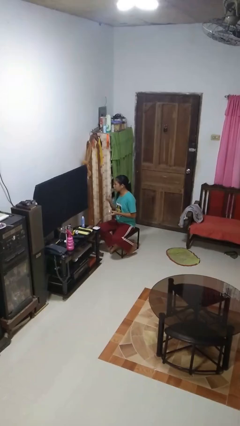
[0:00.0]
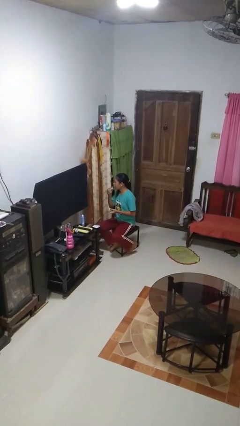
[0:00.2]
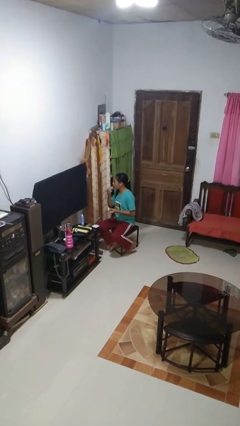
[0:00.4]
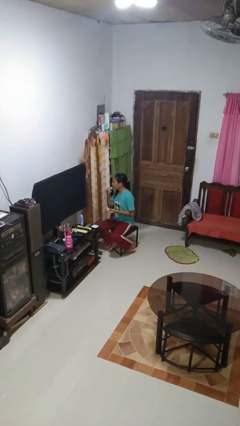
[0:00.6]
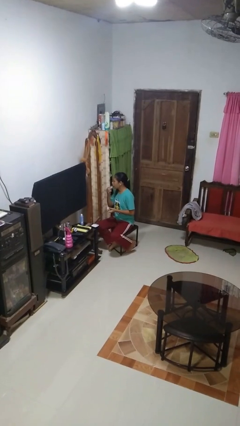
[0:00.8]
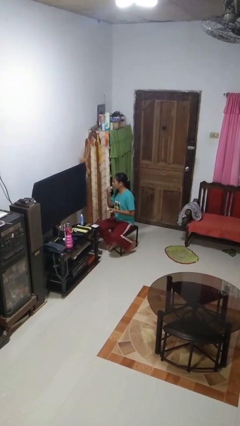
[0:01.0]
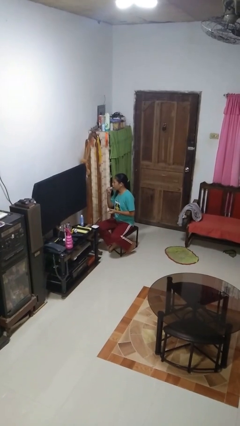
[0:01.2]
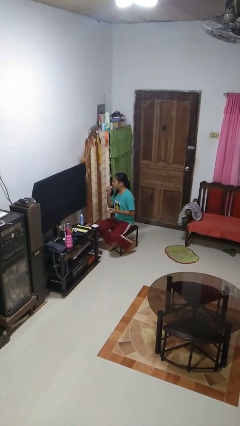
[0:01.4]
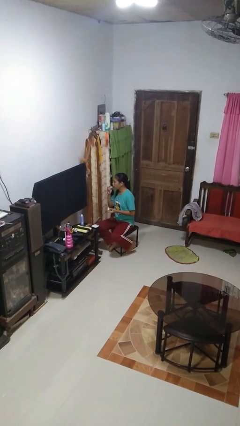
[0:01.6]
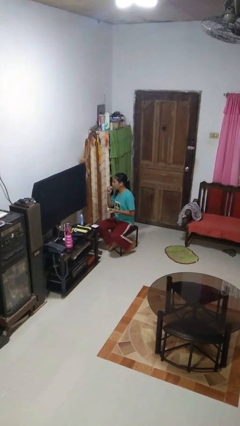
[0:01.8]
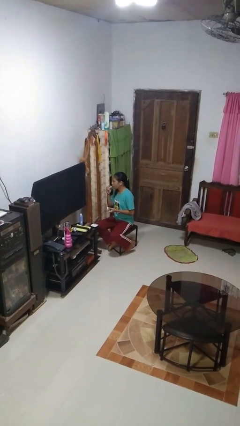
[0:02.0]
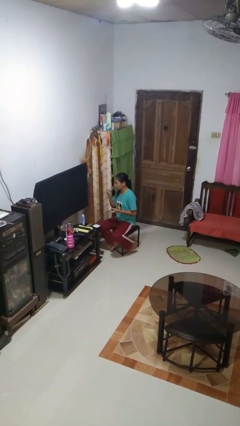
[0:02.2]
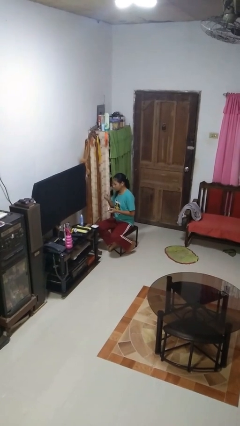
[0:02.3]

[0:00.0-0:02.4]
person applies lip makeup

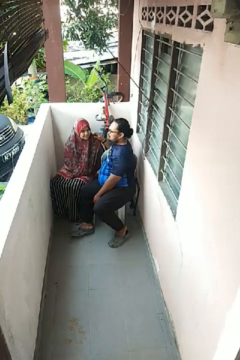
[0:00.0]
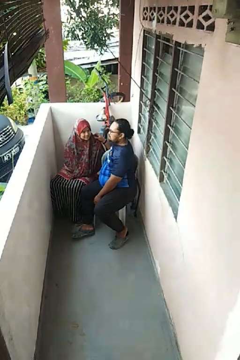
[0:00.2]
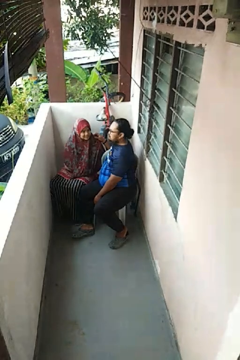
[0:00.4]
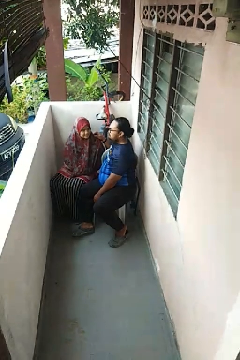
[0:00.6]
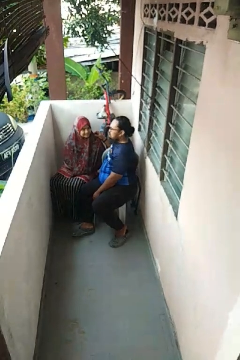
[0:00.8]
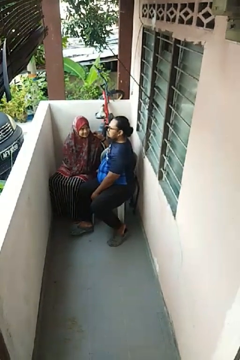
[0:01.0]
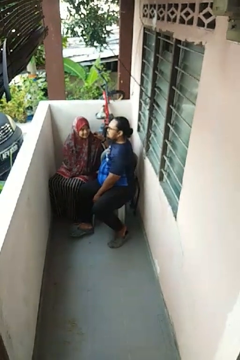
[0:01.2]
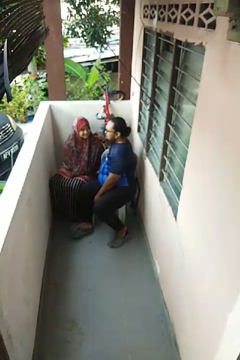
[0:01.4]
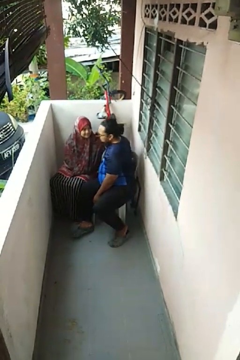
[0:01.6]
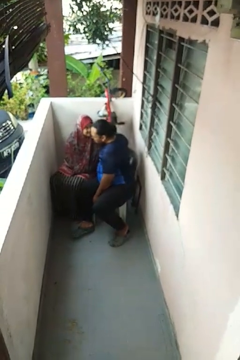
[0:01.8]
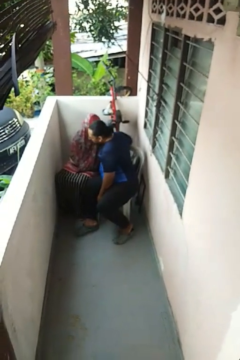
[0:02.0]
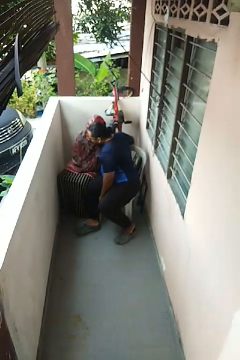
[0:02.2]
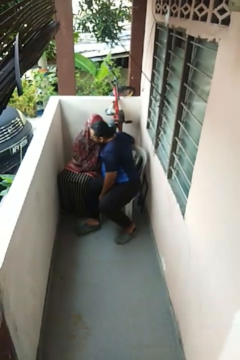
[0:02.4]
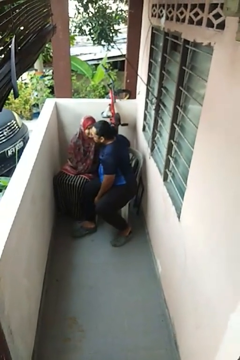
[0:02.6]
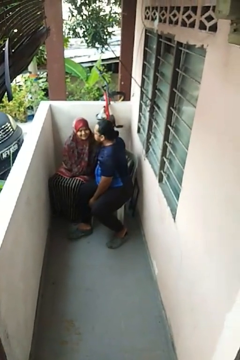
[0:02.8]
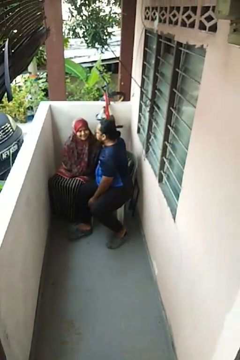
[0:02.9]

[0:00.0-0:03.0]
person kisses cheek of person

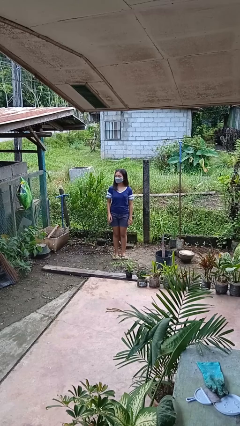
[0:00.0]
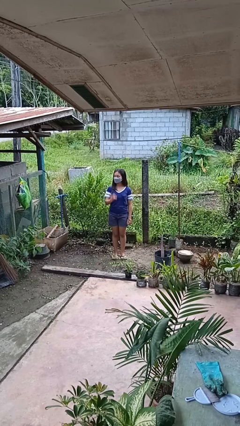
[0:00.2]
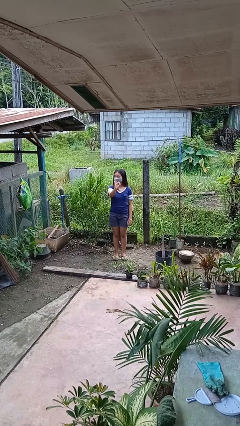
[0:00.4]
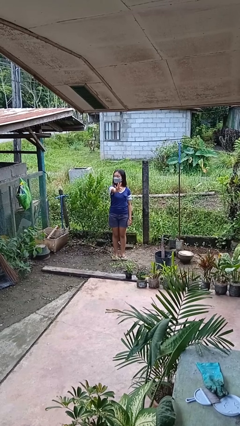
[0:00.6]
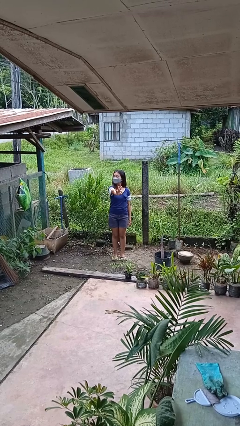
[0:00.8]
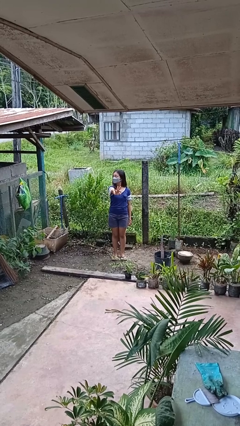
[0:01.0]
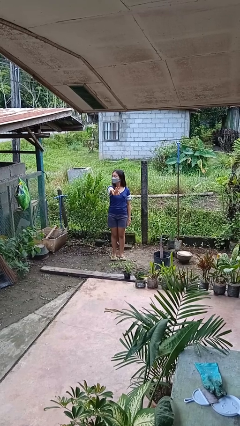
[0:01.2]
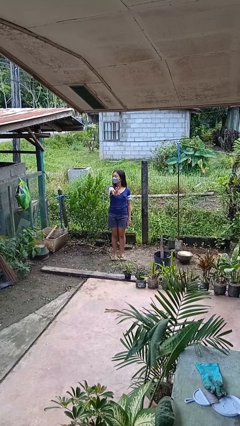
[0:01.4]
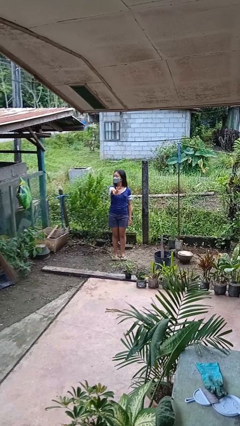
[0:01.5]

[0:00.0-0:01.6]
person gestures number three

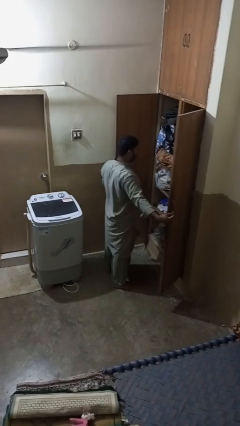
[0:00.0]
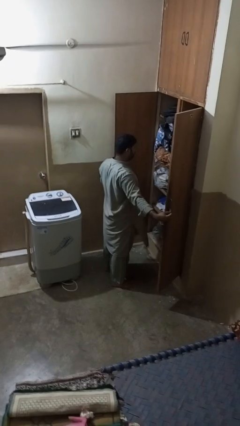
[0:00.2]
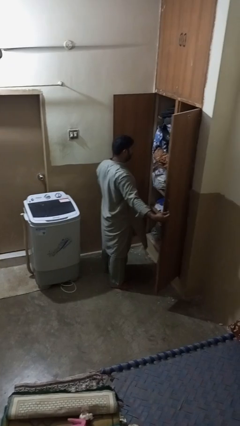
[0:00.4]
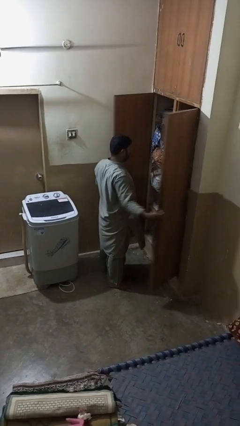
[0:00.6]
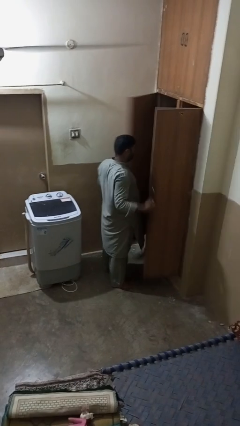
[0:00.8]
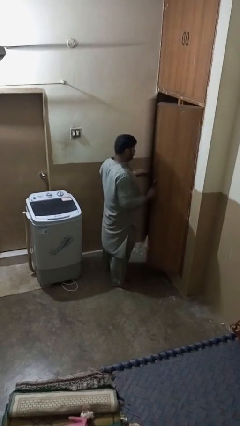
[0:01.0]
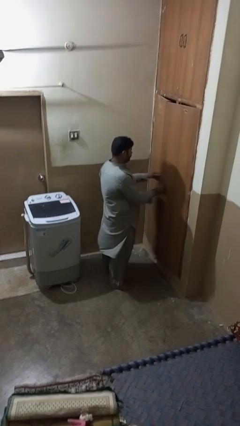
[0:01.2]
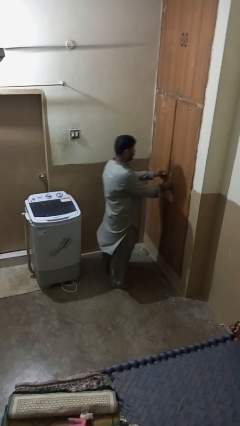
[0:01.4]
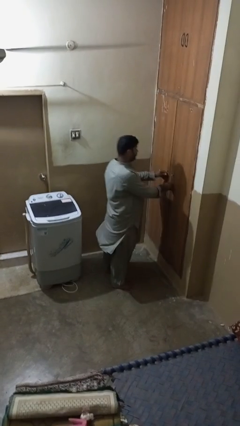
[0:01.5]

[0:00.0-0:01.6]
person closes closet door

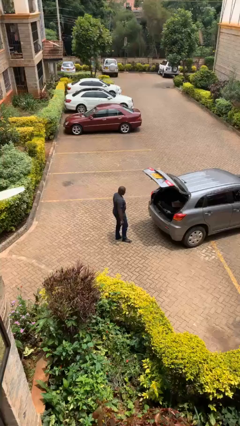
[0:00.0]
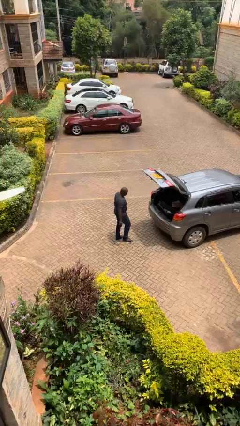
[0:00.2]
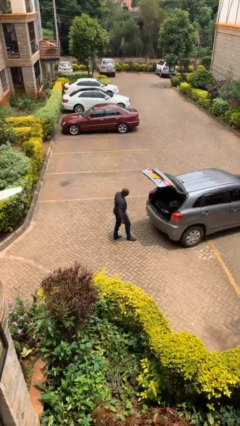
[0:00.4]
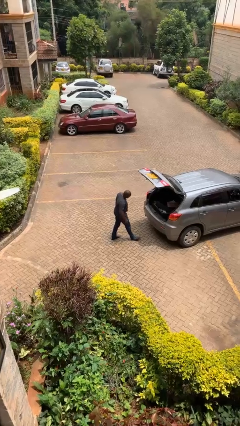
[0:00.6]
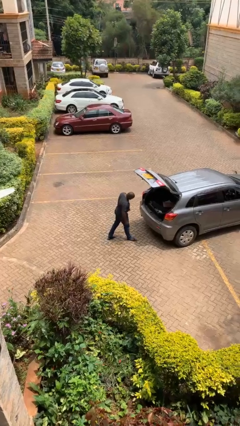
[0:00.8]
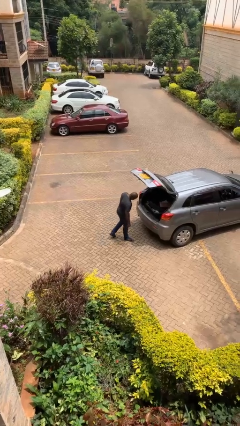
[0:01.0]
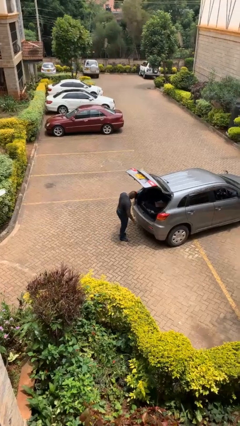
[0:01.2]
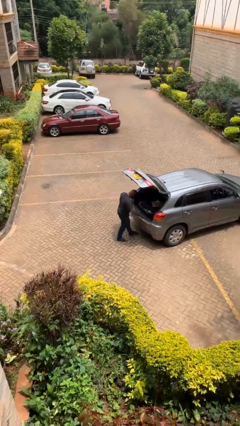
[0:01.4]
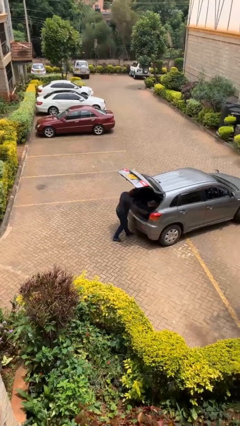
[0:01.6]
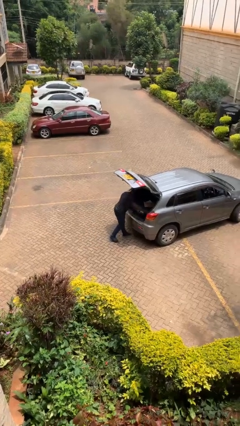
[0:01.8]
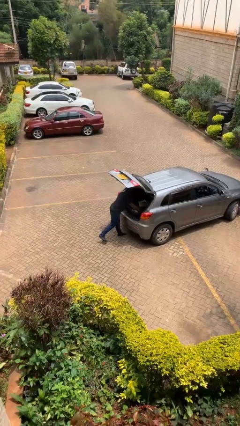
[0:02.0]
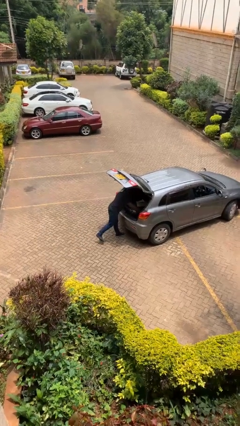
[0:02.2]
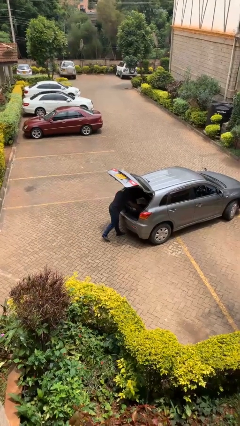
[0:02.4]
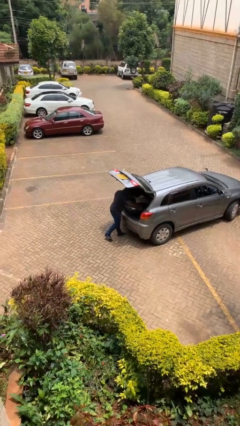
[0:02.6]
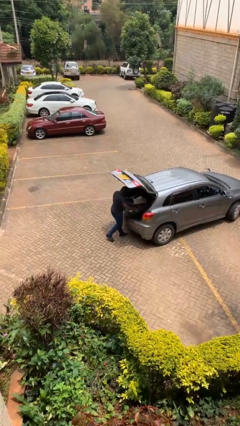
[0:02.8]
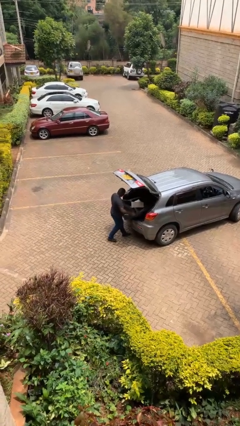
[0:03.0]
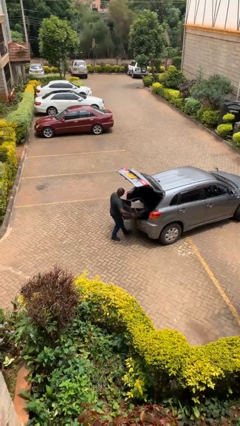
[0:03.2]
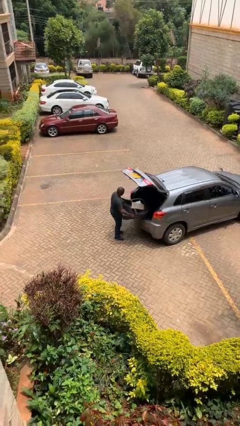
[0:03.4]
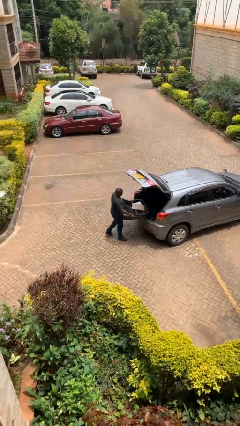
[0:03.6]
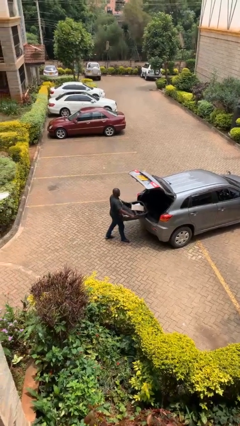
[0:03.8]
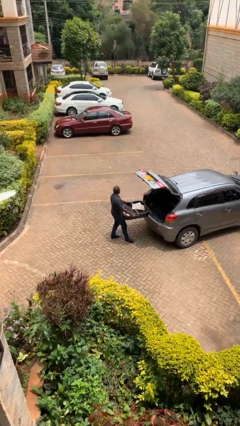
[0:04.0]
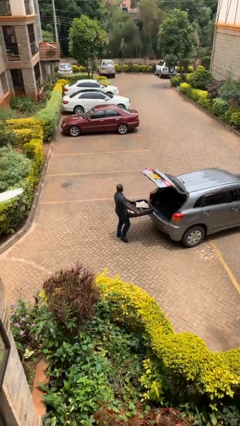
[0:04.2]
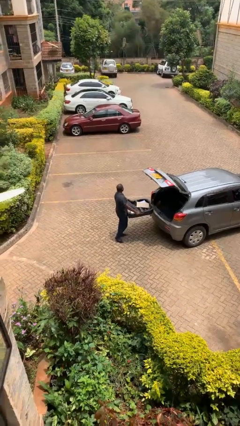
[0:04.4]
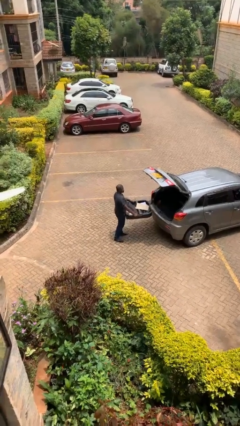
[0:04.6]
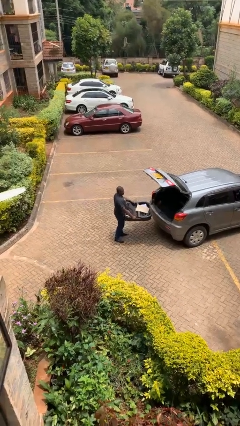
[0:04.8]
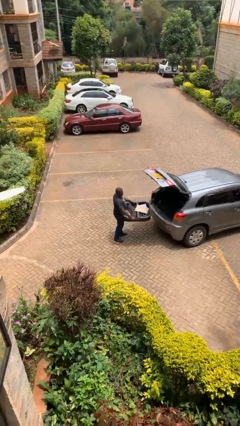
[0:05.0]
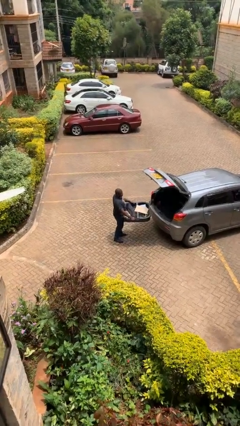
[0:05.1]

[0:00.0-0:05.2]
person unloads car

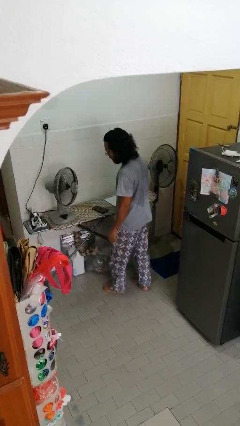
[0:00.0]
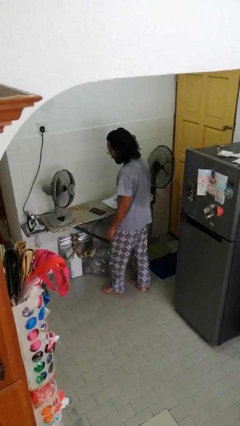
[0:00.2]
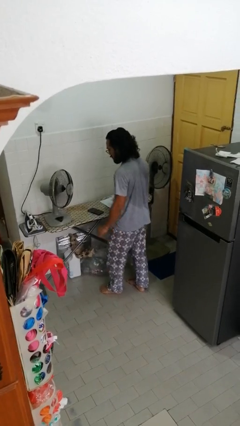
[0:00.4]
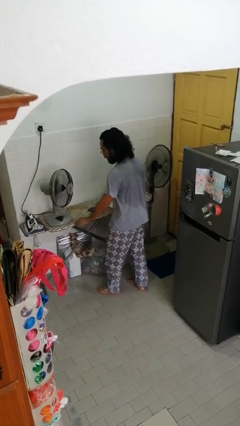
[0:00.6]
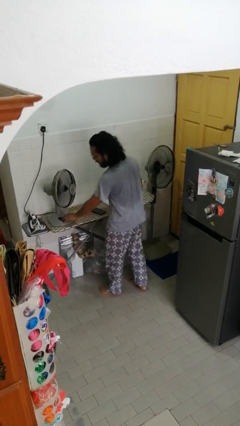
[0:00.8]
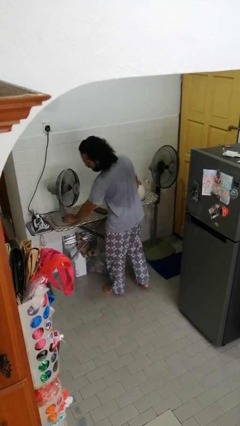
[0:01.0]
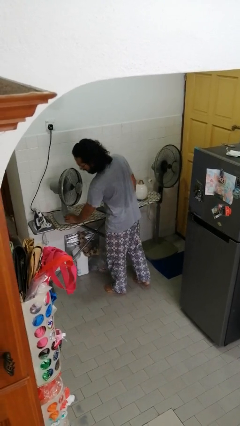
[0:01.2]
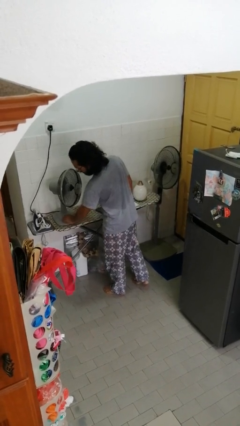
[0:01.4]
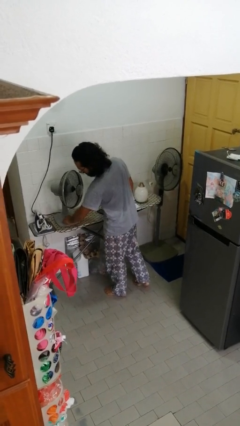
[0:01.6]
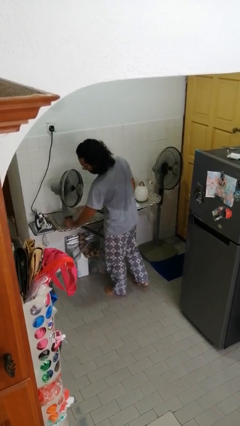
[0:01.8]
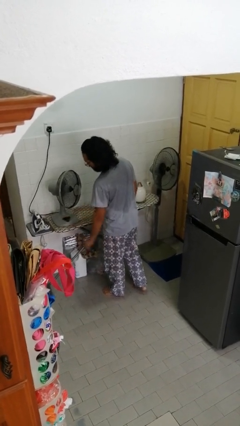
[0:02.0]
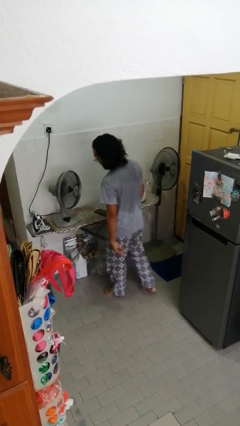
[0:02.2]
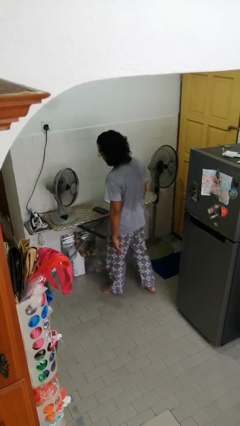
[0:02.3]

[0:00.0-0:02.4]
person turns off fan

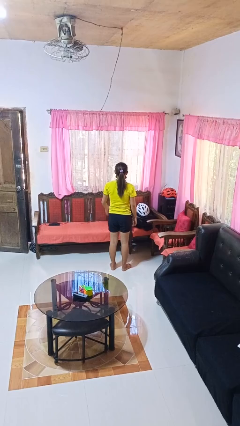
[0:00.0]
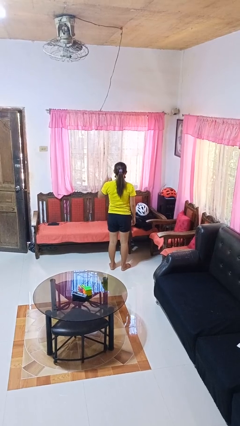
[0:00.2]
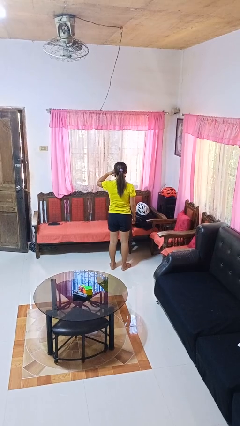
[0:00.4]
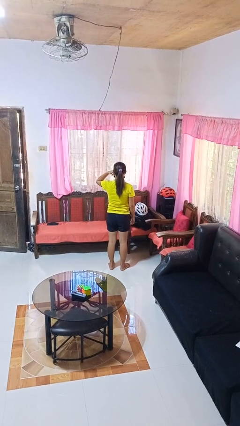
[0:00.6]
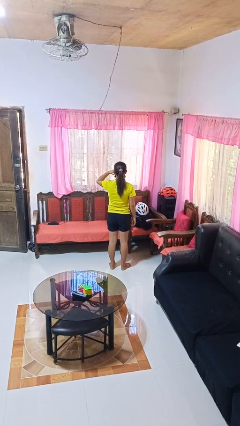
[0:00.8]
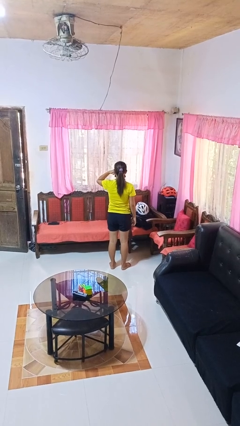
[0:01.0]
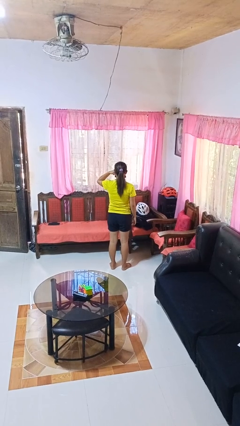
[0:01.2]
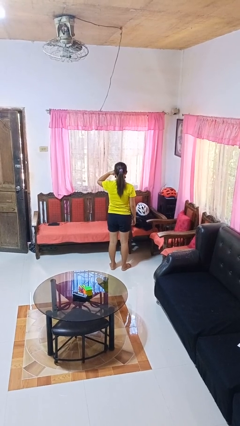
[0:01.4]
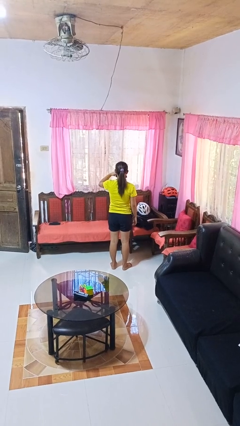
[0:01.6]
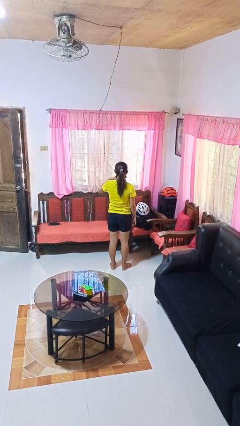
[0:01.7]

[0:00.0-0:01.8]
person gestures call me
